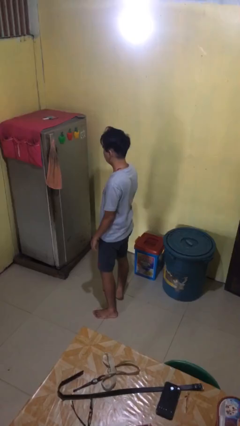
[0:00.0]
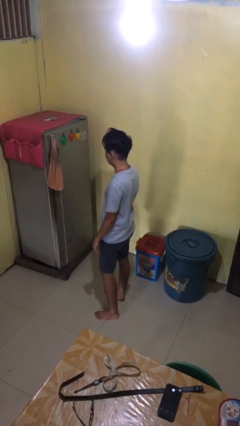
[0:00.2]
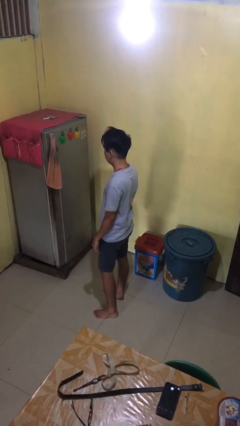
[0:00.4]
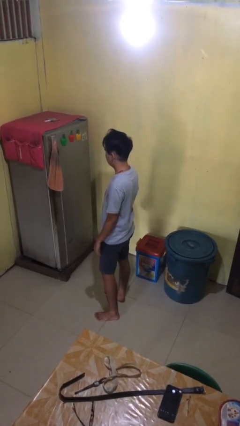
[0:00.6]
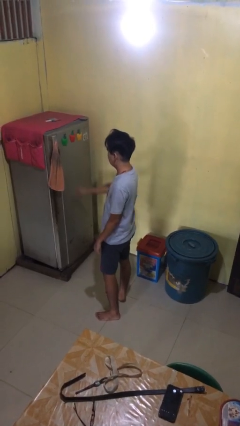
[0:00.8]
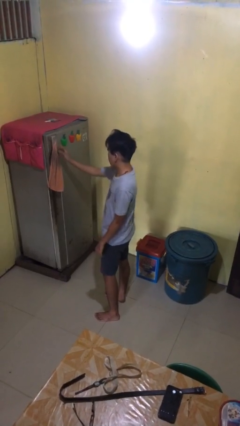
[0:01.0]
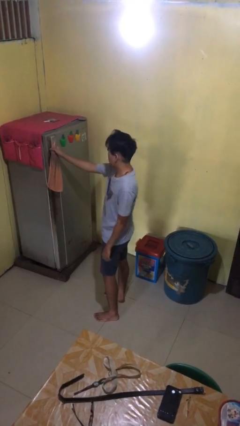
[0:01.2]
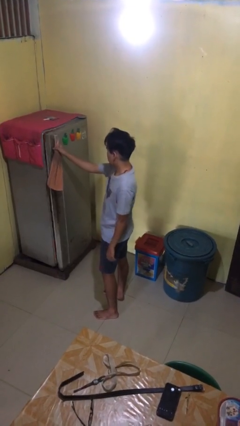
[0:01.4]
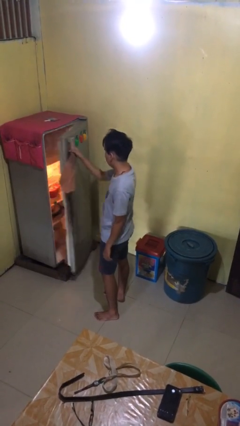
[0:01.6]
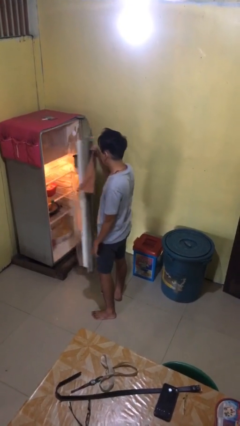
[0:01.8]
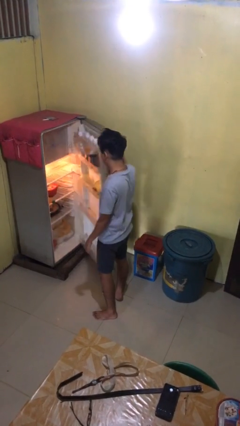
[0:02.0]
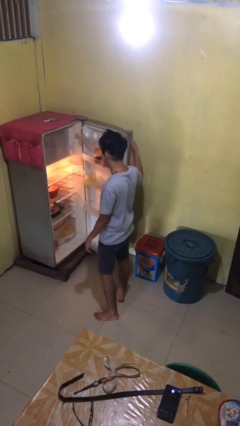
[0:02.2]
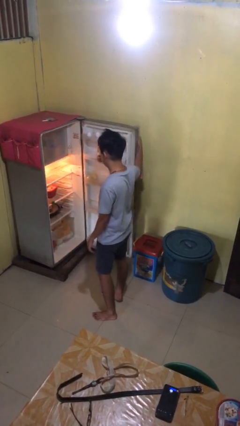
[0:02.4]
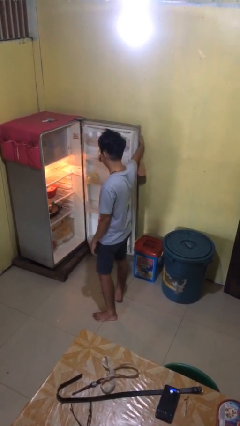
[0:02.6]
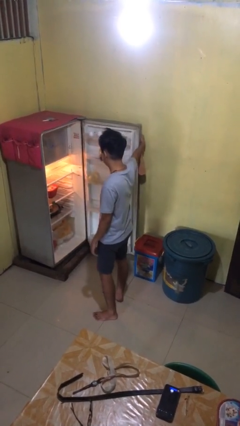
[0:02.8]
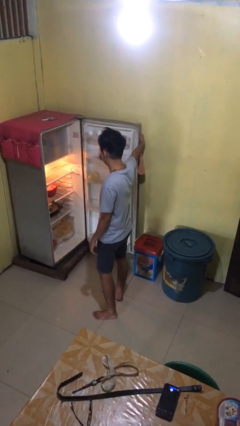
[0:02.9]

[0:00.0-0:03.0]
person opens refrigerator

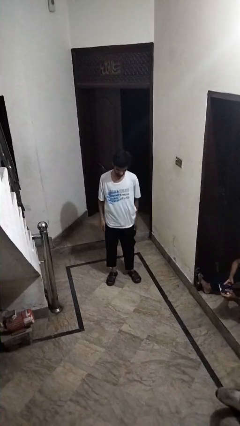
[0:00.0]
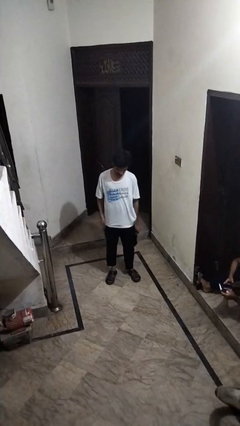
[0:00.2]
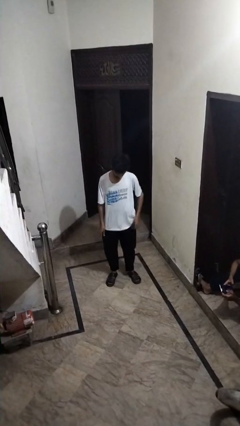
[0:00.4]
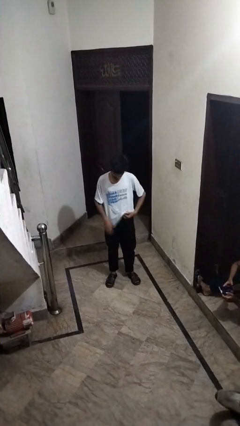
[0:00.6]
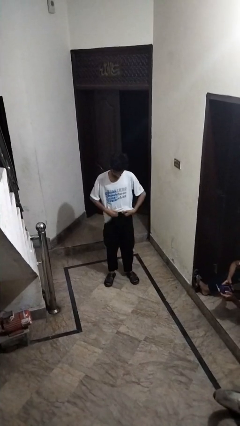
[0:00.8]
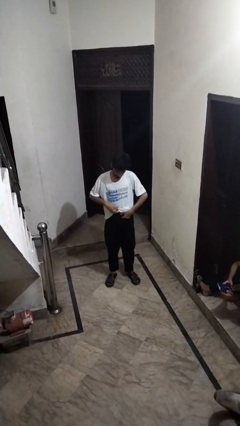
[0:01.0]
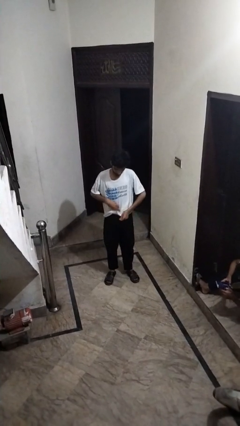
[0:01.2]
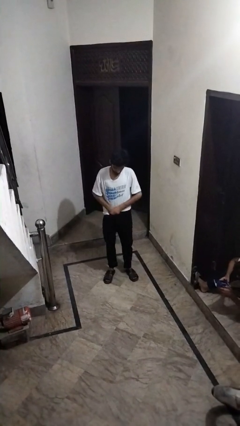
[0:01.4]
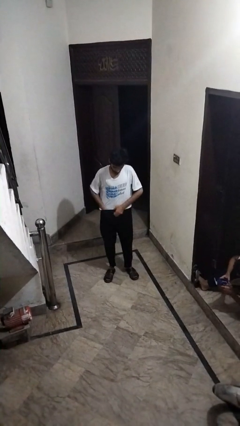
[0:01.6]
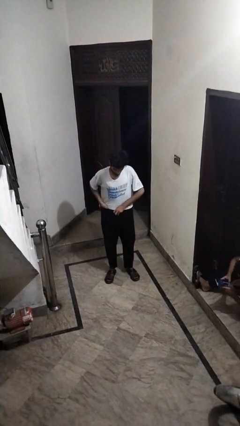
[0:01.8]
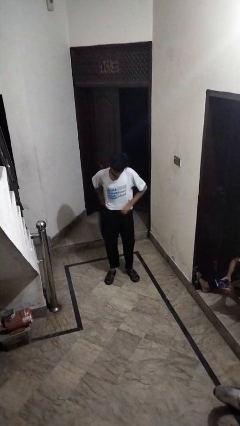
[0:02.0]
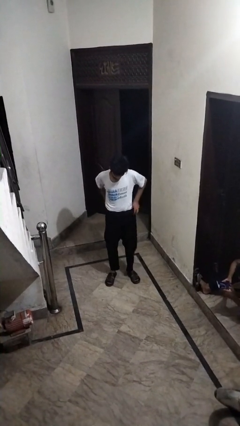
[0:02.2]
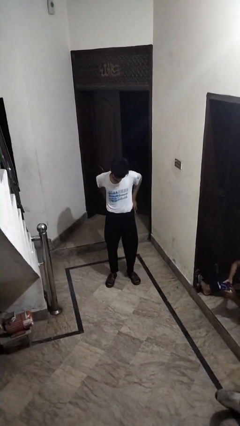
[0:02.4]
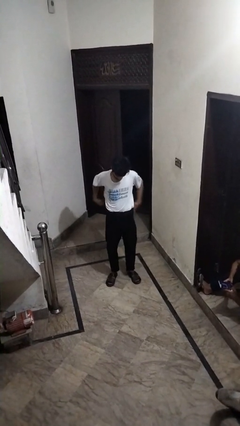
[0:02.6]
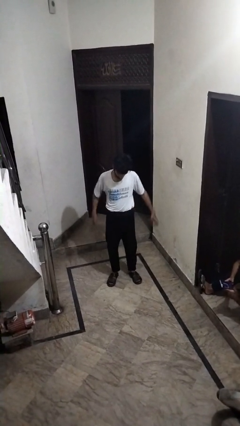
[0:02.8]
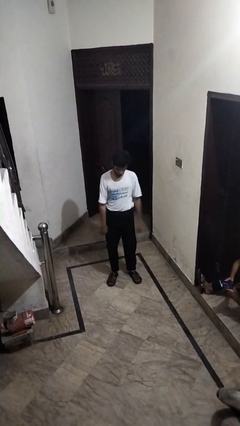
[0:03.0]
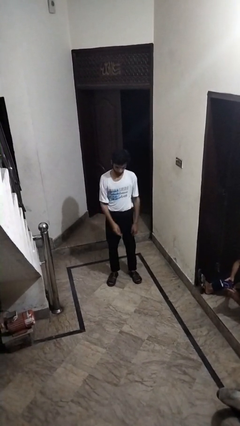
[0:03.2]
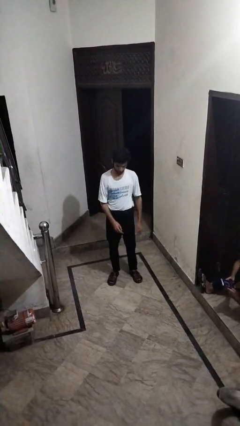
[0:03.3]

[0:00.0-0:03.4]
person tucks in shirt

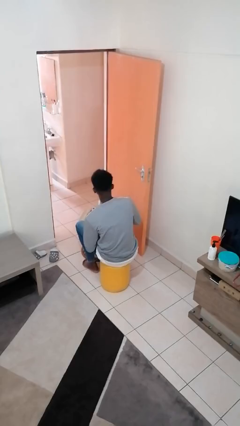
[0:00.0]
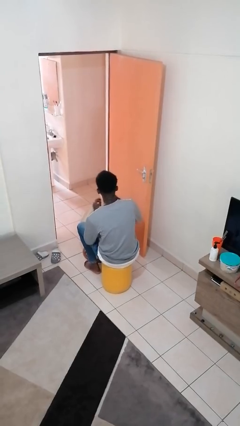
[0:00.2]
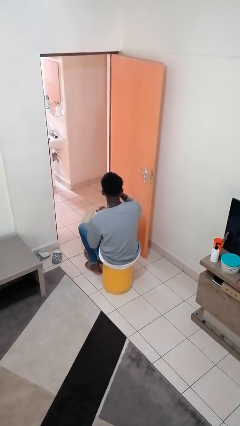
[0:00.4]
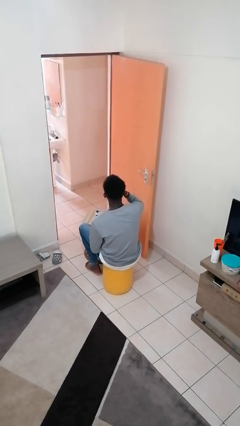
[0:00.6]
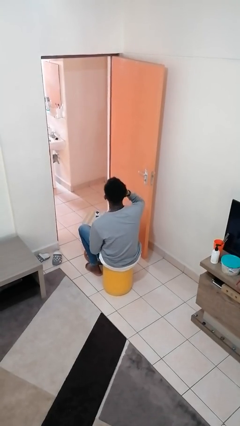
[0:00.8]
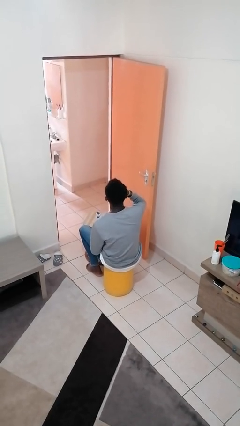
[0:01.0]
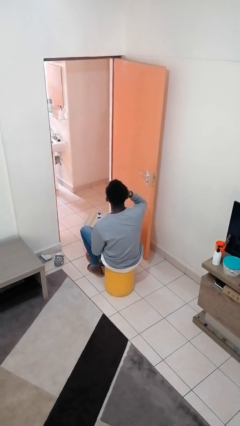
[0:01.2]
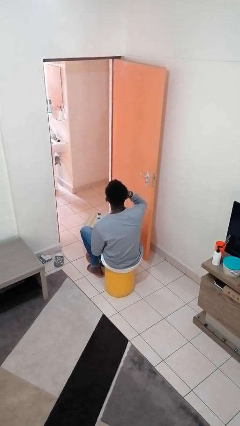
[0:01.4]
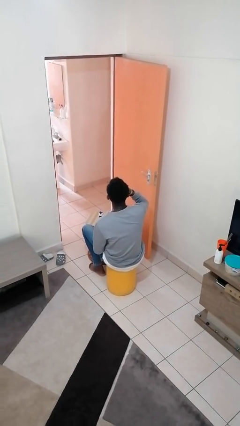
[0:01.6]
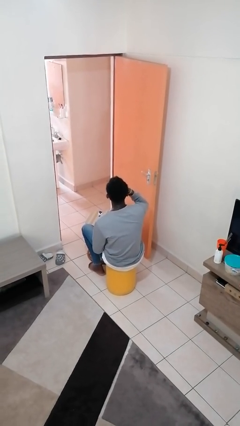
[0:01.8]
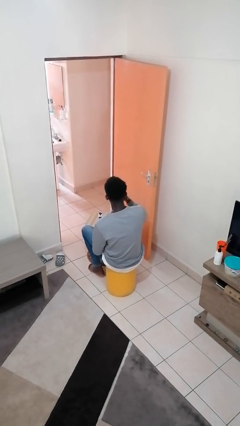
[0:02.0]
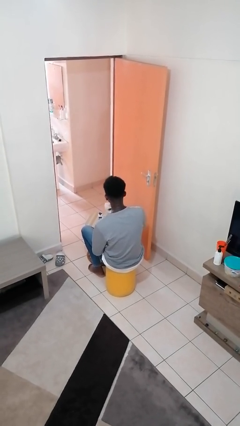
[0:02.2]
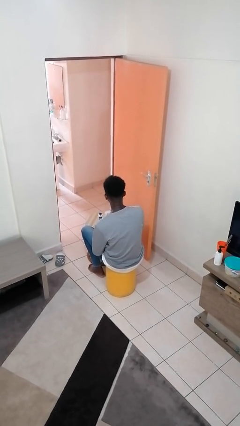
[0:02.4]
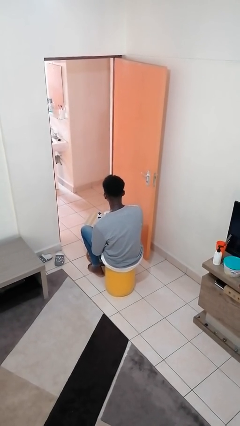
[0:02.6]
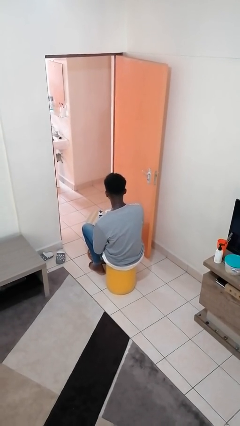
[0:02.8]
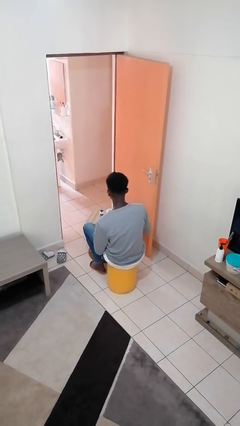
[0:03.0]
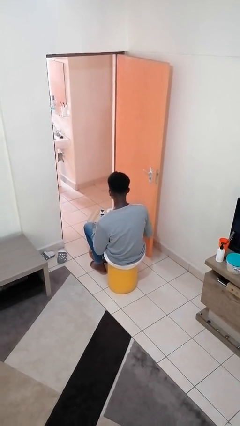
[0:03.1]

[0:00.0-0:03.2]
person drinks from cup

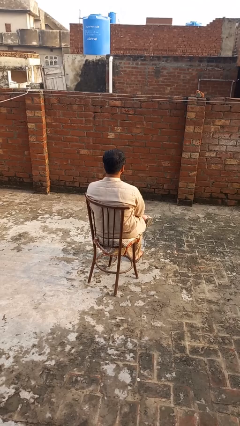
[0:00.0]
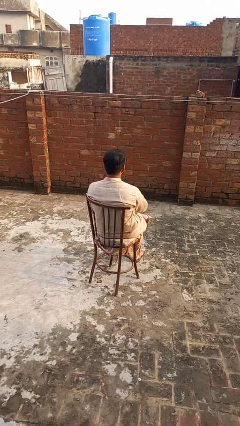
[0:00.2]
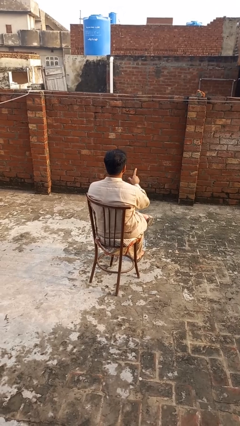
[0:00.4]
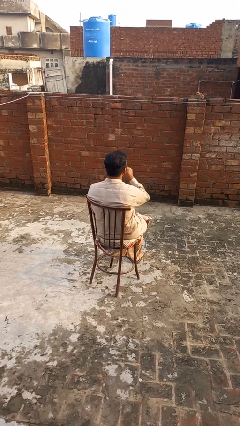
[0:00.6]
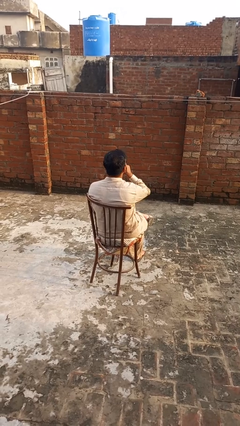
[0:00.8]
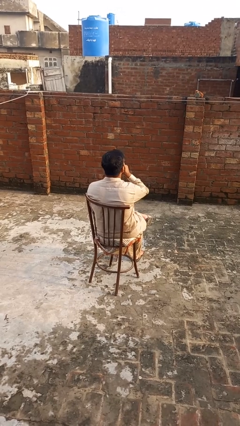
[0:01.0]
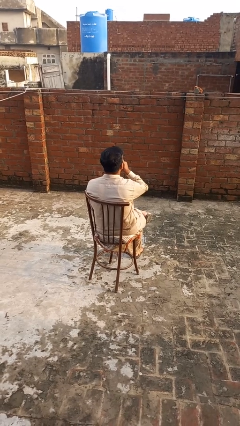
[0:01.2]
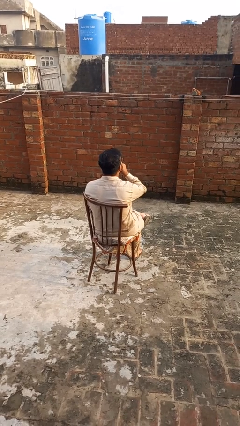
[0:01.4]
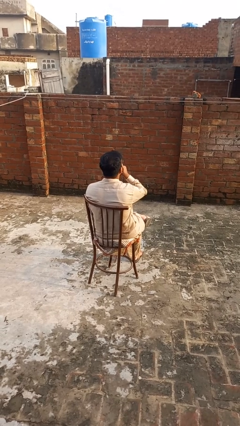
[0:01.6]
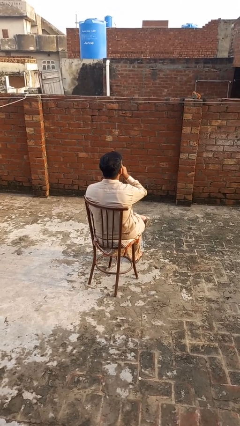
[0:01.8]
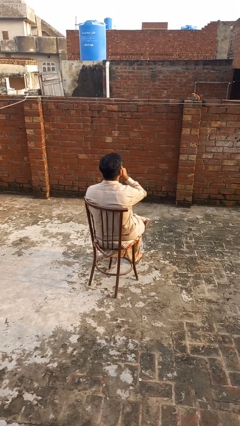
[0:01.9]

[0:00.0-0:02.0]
person gestures be quiet

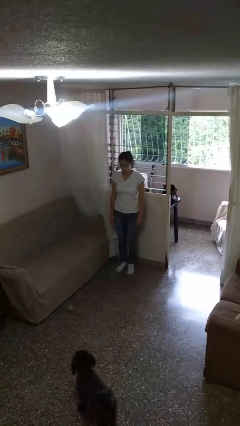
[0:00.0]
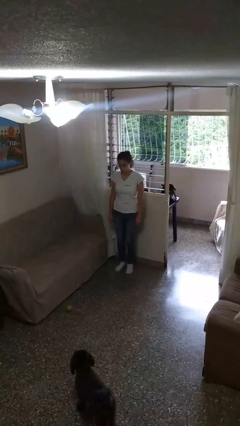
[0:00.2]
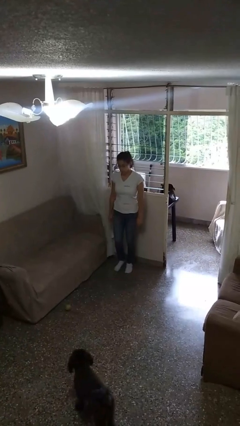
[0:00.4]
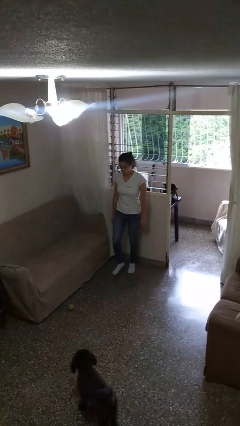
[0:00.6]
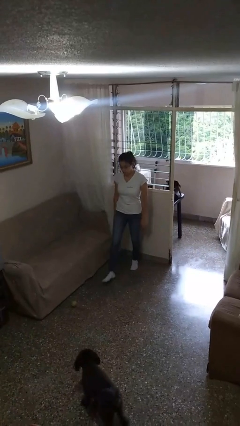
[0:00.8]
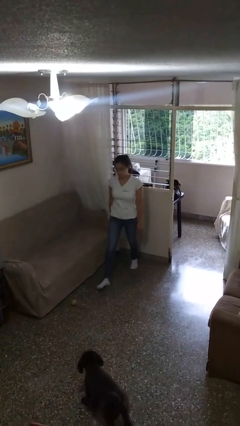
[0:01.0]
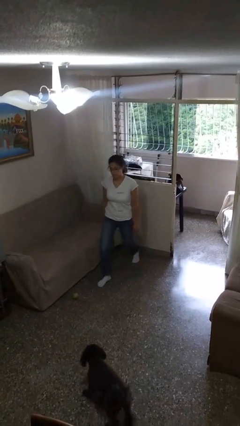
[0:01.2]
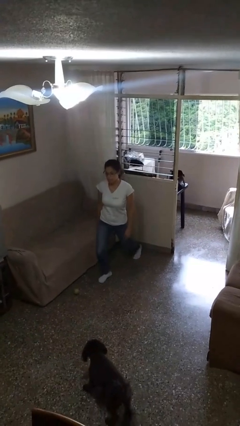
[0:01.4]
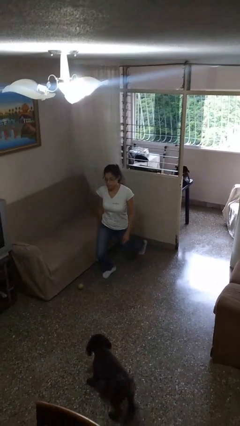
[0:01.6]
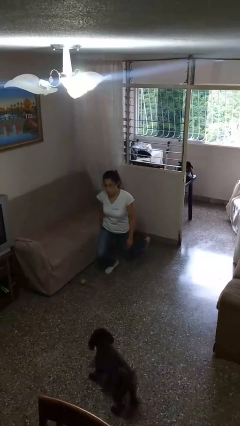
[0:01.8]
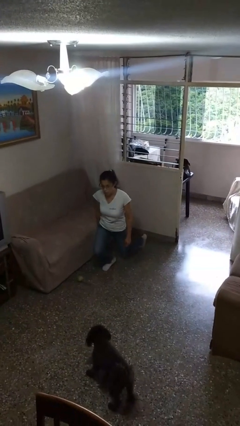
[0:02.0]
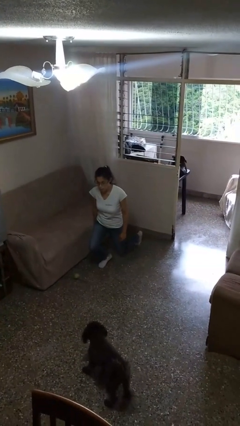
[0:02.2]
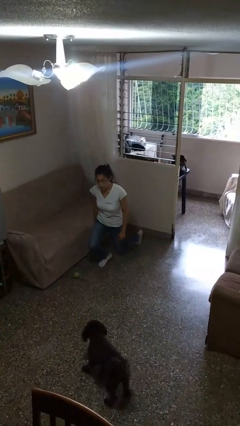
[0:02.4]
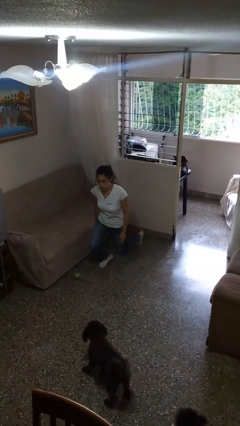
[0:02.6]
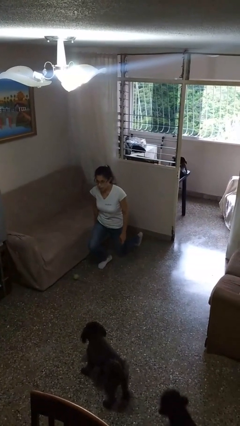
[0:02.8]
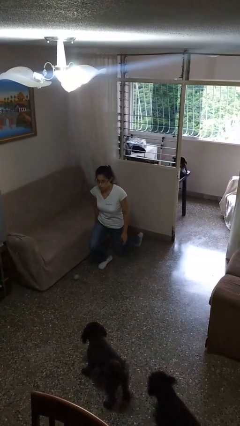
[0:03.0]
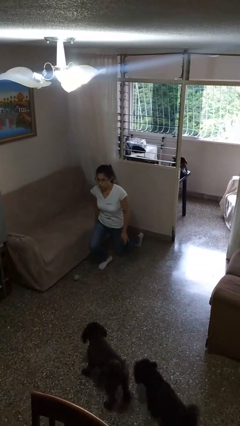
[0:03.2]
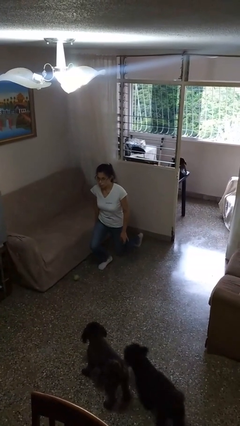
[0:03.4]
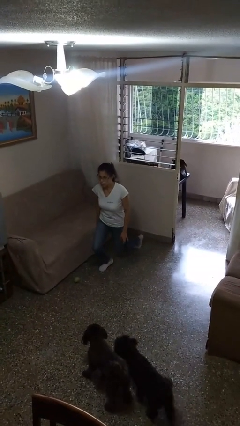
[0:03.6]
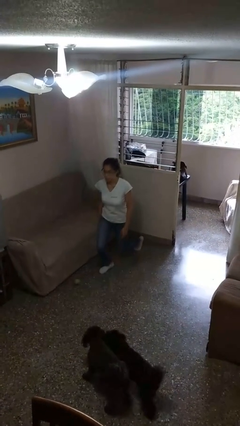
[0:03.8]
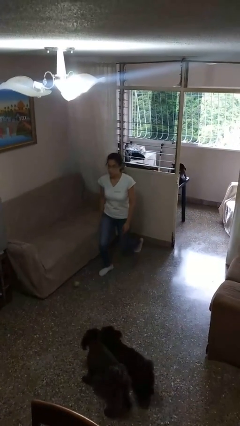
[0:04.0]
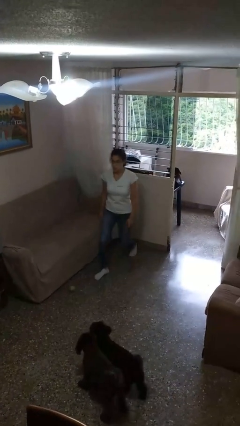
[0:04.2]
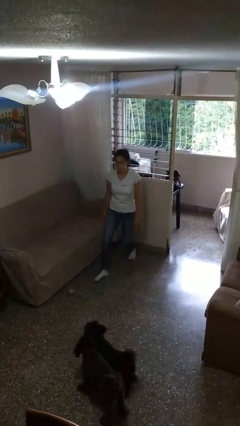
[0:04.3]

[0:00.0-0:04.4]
person exercises with lunges

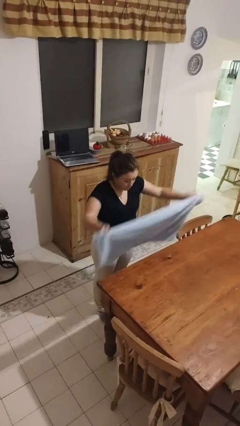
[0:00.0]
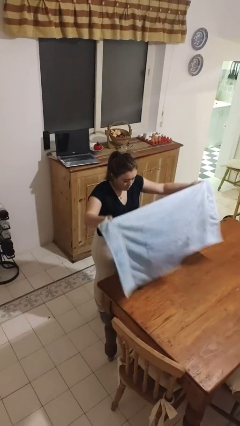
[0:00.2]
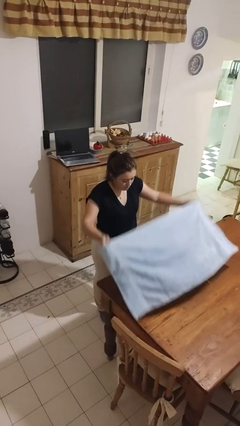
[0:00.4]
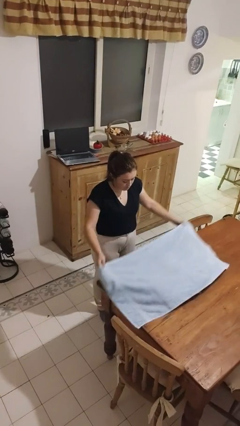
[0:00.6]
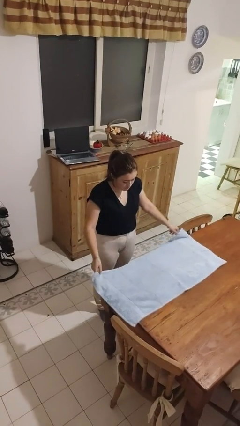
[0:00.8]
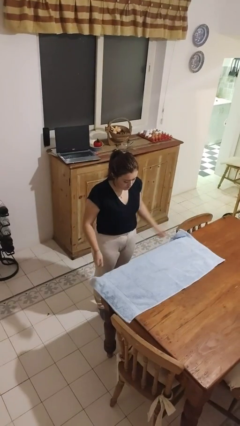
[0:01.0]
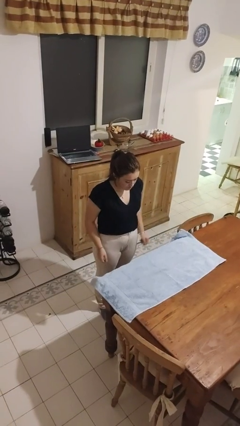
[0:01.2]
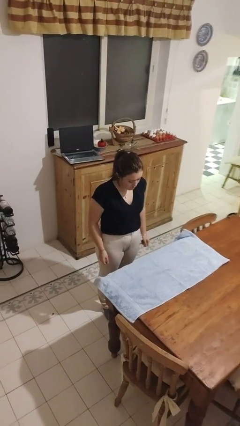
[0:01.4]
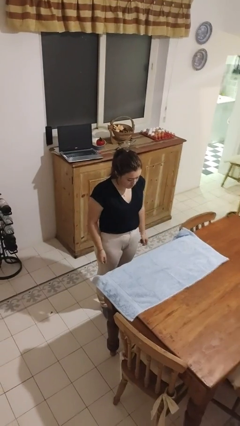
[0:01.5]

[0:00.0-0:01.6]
person spreads tablecloth

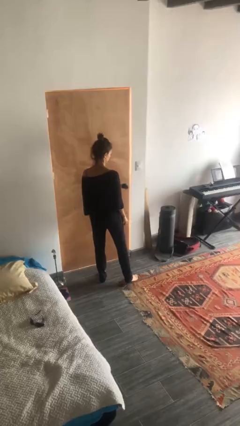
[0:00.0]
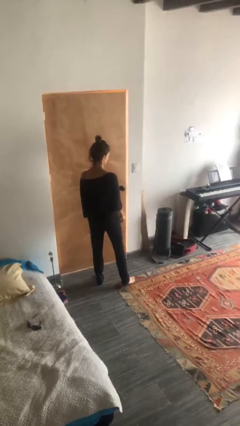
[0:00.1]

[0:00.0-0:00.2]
person opens facility door
